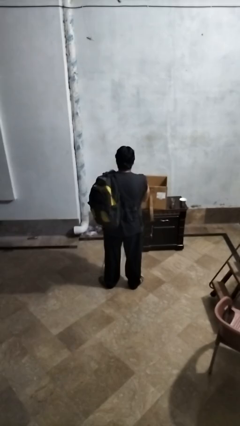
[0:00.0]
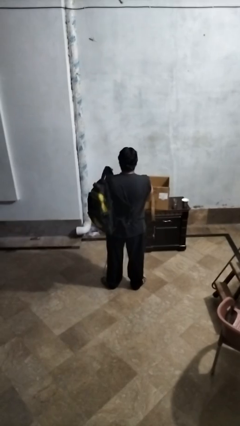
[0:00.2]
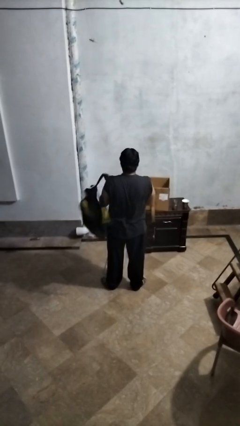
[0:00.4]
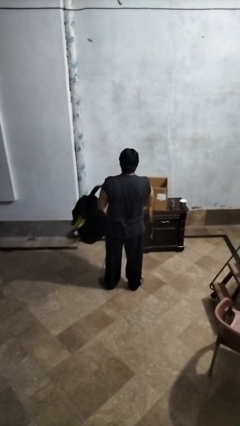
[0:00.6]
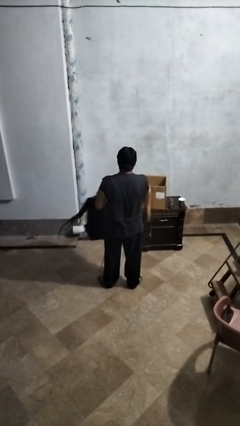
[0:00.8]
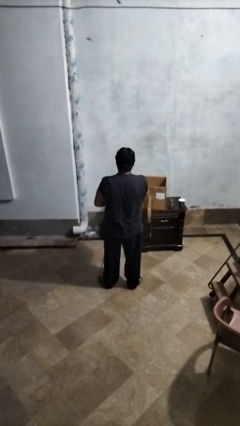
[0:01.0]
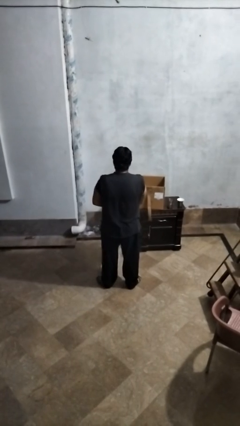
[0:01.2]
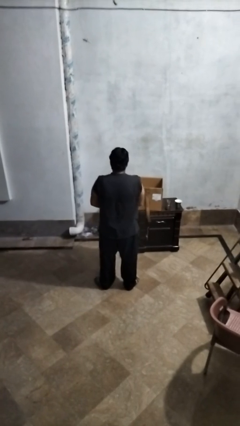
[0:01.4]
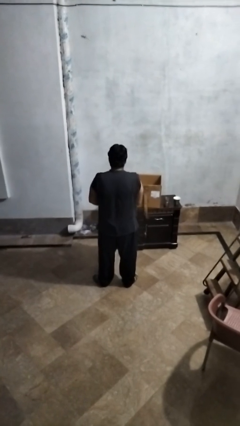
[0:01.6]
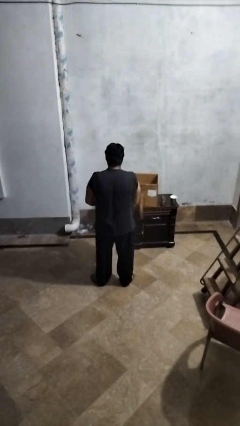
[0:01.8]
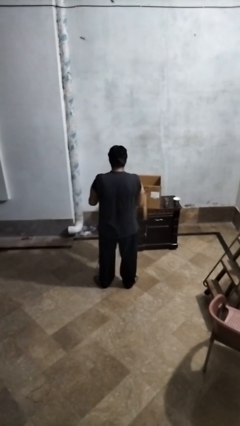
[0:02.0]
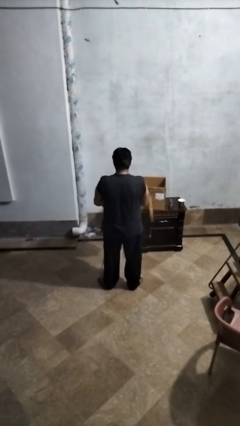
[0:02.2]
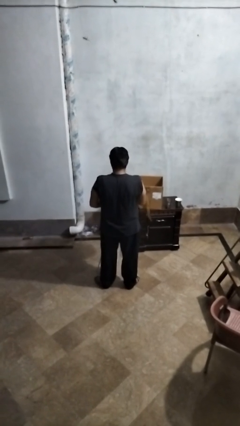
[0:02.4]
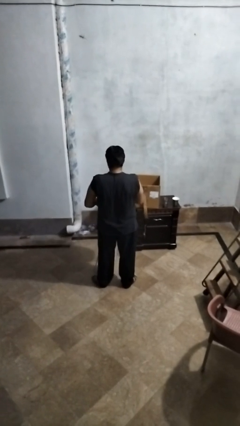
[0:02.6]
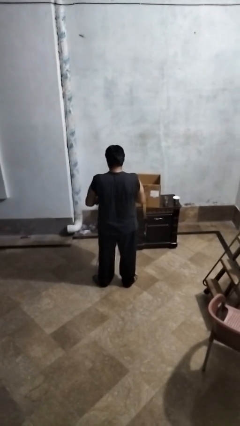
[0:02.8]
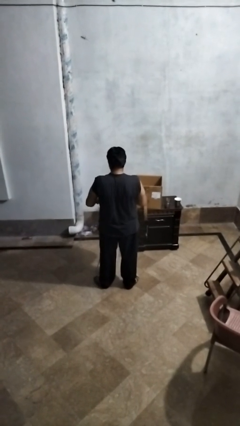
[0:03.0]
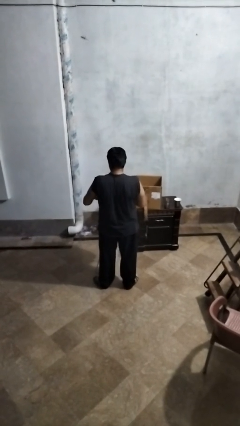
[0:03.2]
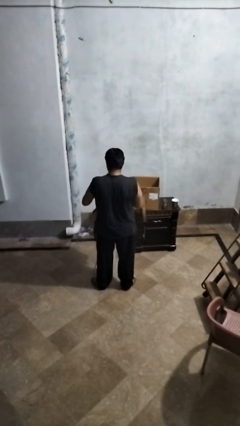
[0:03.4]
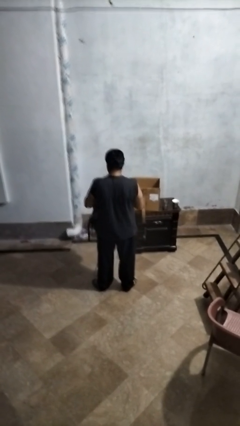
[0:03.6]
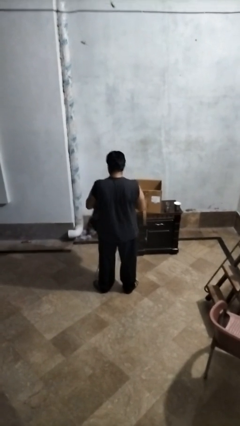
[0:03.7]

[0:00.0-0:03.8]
person takes off backpack

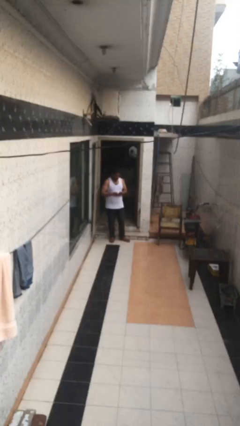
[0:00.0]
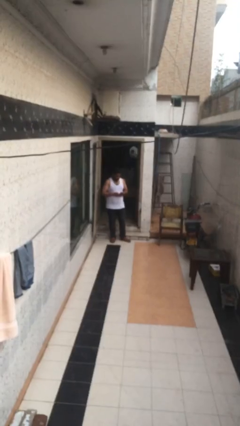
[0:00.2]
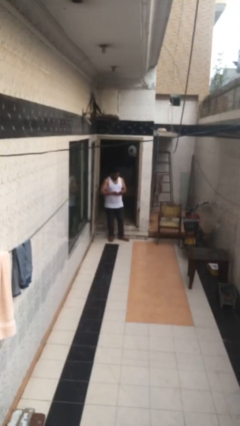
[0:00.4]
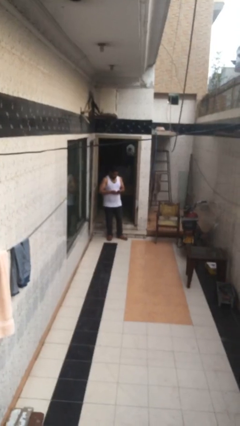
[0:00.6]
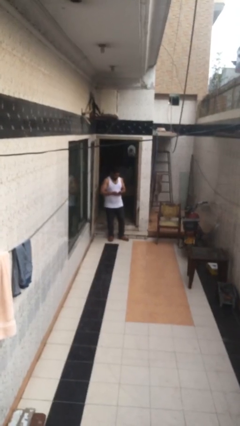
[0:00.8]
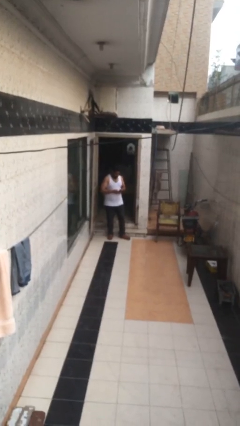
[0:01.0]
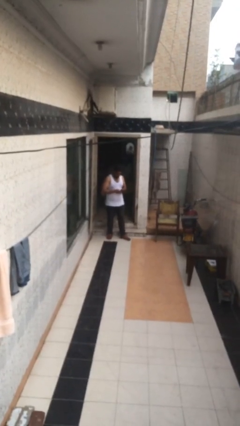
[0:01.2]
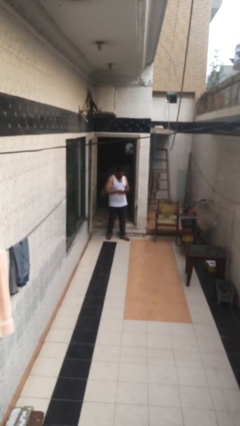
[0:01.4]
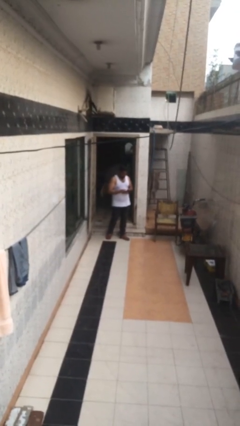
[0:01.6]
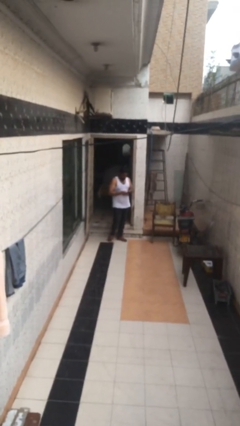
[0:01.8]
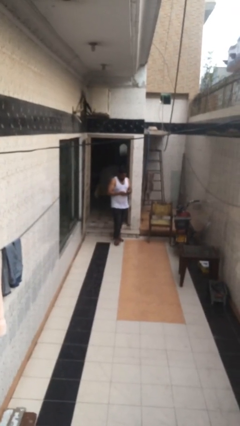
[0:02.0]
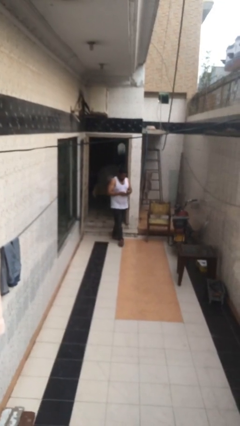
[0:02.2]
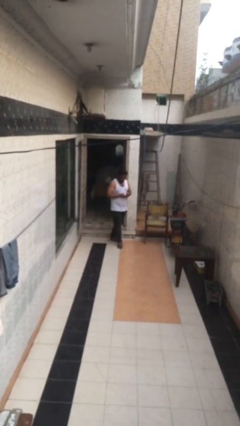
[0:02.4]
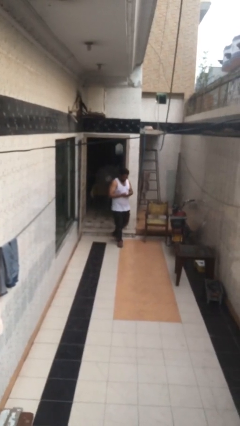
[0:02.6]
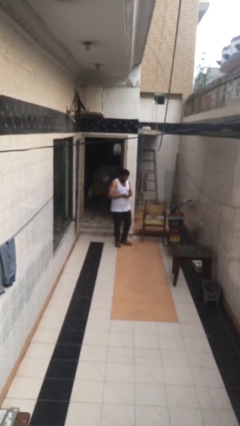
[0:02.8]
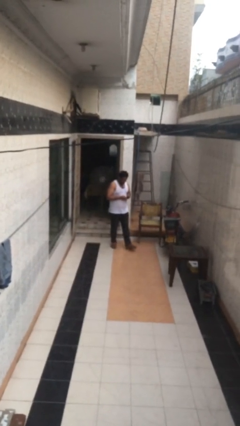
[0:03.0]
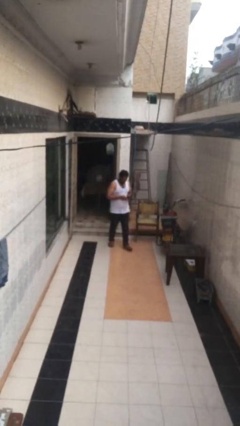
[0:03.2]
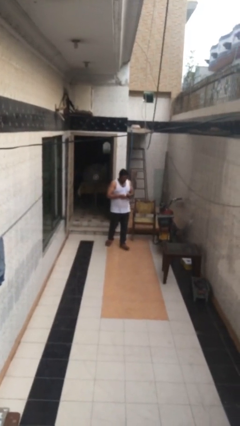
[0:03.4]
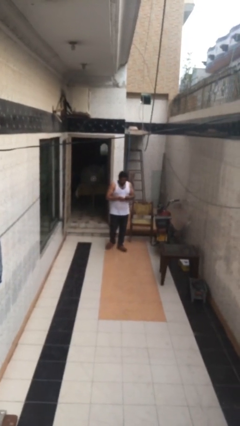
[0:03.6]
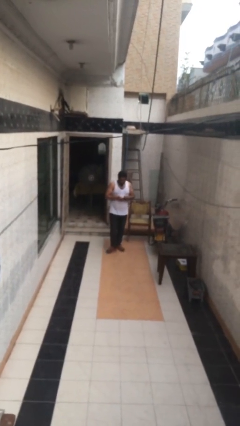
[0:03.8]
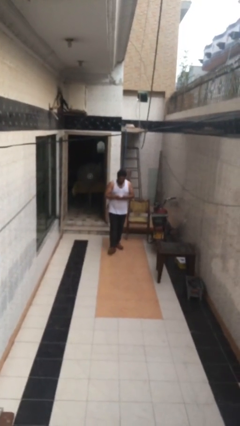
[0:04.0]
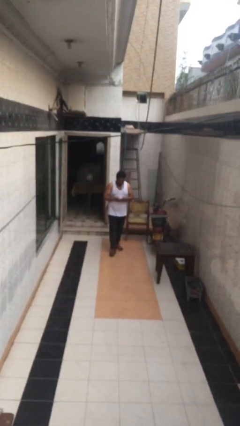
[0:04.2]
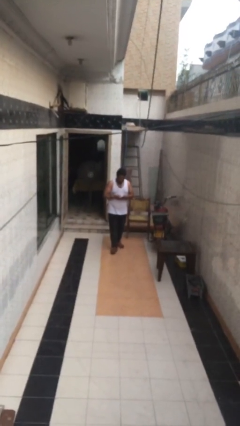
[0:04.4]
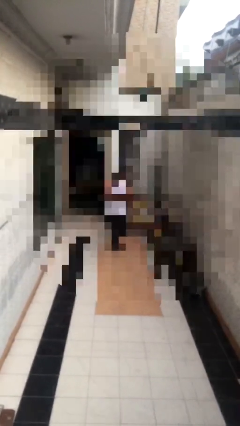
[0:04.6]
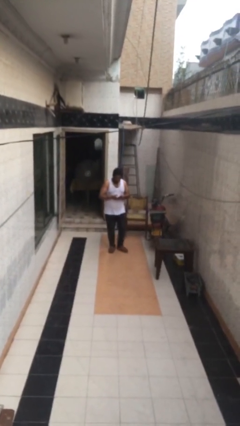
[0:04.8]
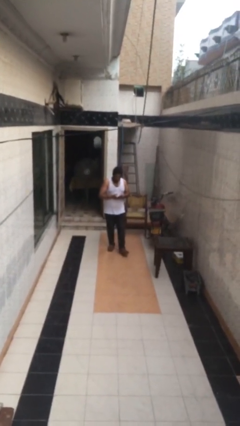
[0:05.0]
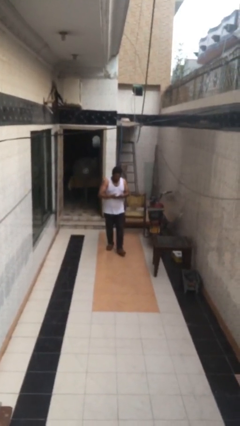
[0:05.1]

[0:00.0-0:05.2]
person texts on phone

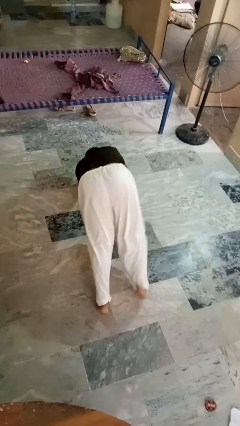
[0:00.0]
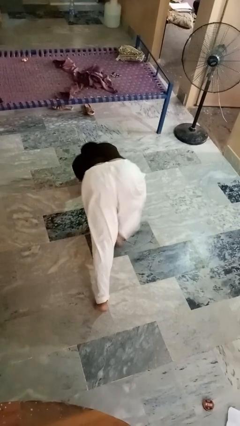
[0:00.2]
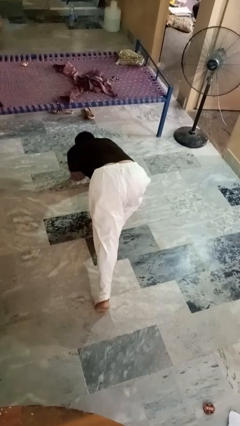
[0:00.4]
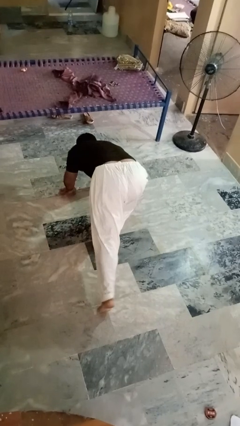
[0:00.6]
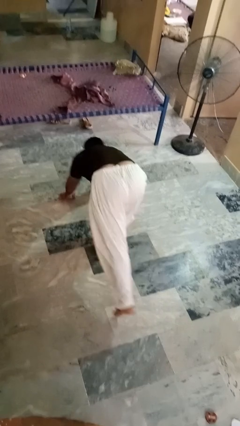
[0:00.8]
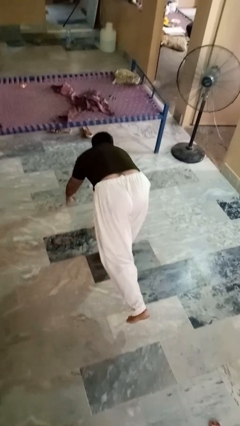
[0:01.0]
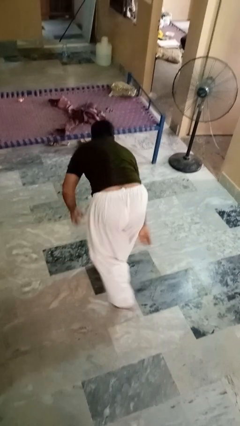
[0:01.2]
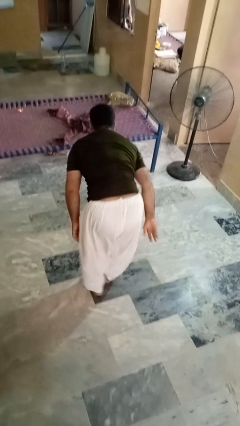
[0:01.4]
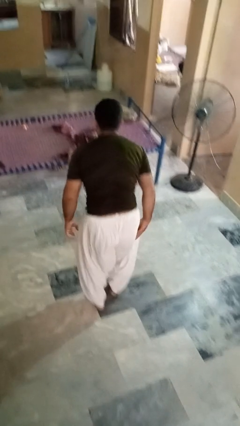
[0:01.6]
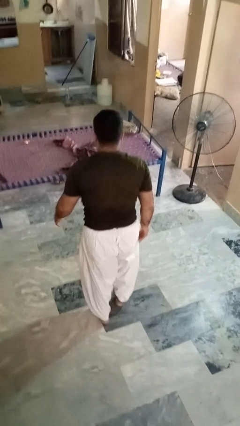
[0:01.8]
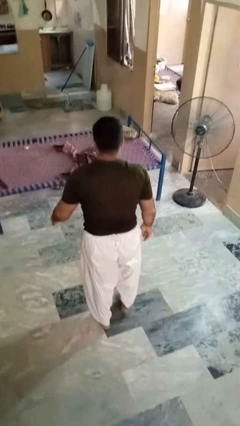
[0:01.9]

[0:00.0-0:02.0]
person stands up from floor

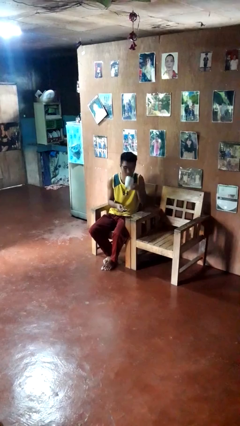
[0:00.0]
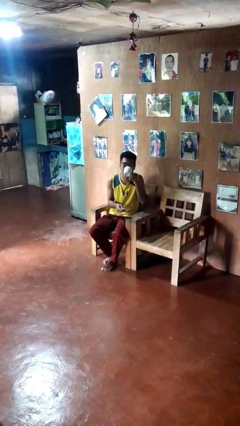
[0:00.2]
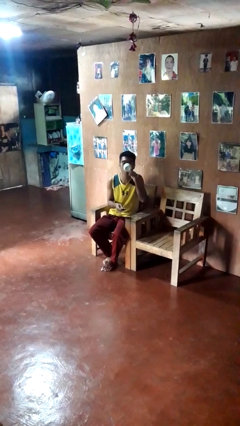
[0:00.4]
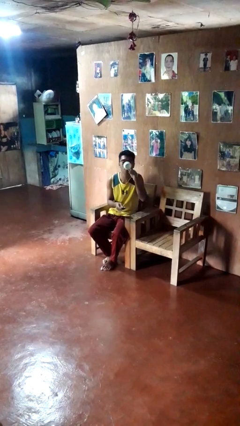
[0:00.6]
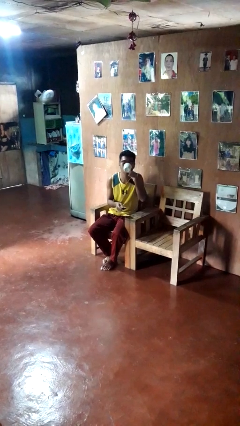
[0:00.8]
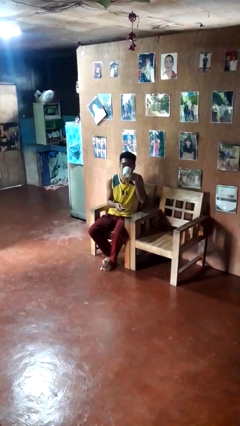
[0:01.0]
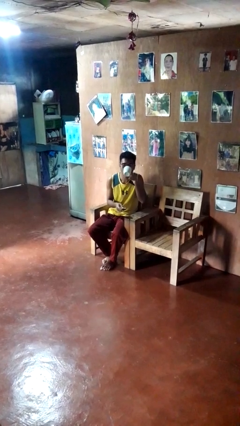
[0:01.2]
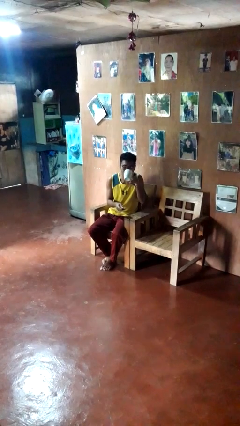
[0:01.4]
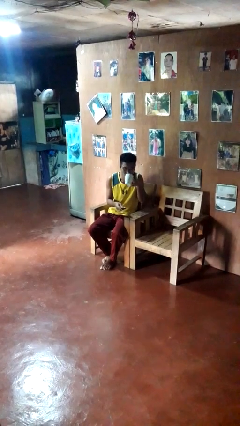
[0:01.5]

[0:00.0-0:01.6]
person drinks from cup

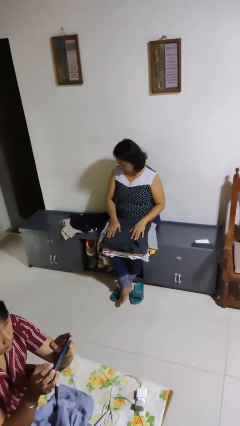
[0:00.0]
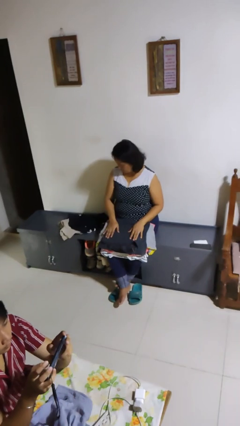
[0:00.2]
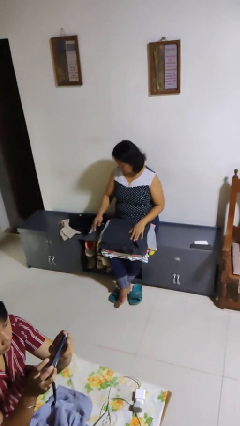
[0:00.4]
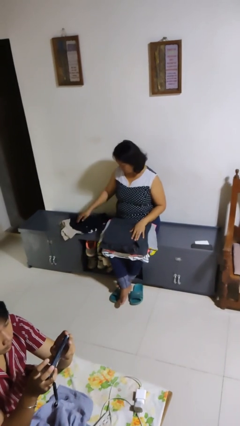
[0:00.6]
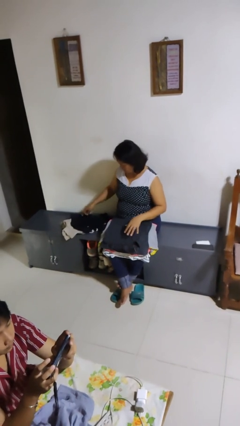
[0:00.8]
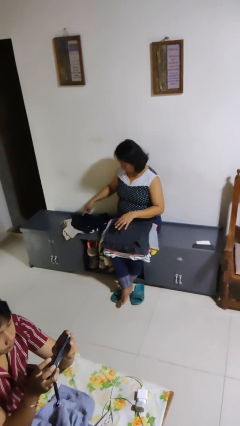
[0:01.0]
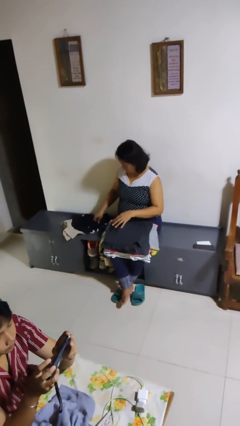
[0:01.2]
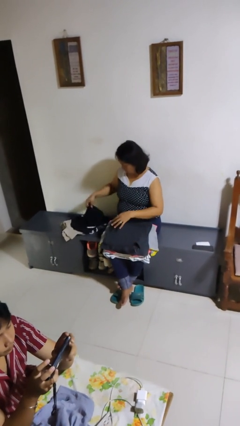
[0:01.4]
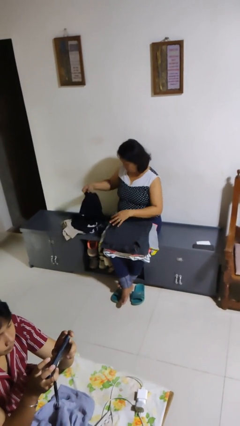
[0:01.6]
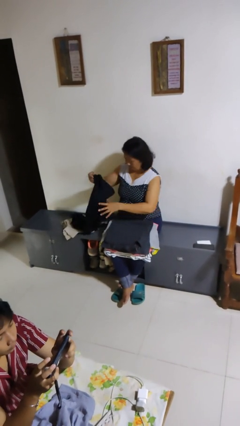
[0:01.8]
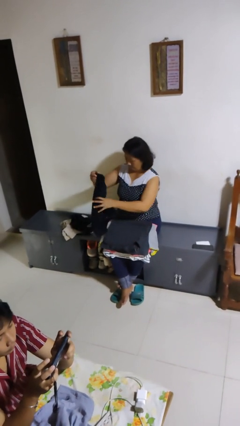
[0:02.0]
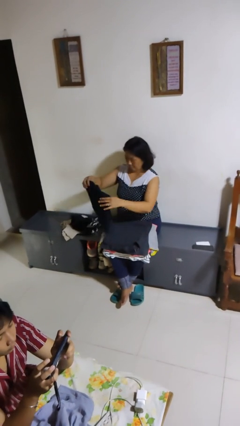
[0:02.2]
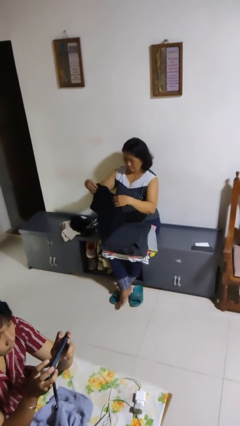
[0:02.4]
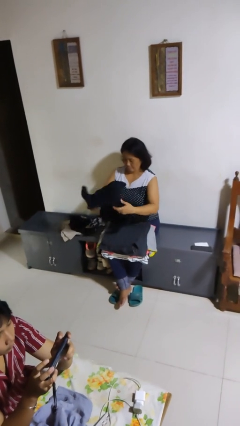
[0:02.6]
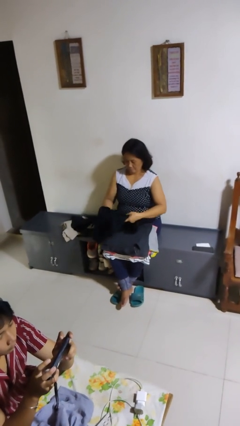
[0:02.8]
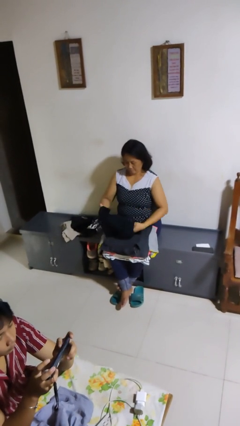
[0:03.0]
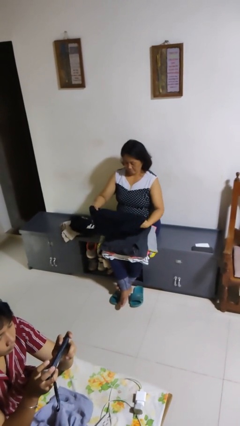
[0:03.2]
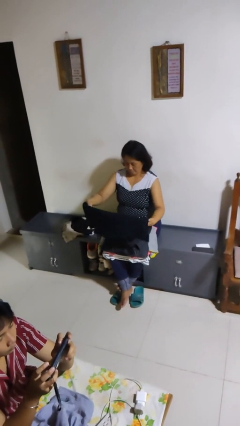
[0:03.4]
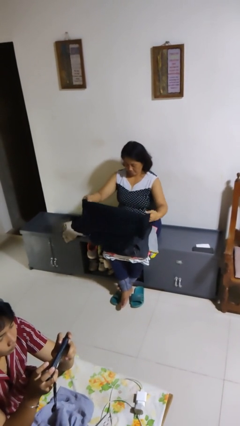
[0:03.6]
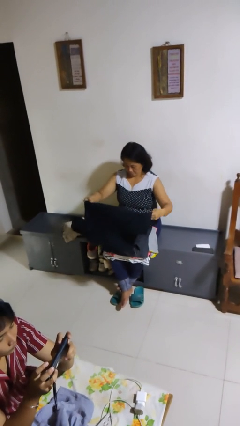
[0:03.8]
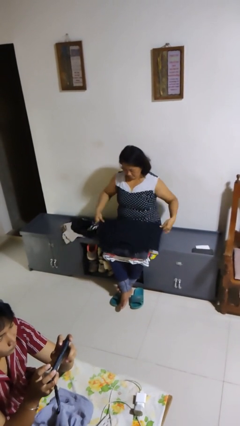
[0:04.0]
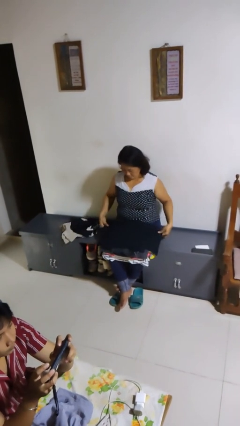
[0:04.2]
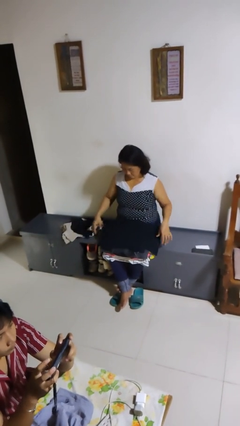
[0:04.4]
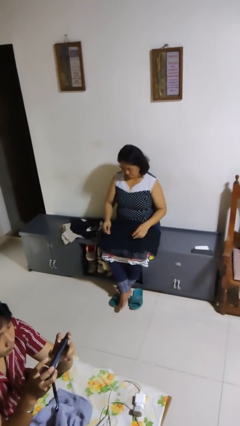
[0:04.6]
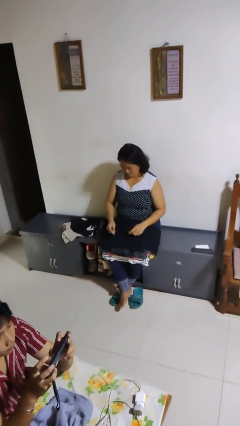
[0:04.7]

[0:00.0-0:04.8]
person folds shirt

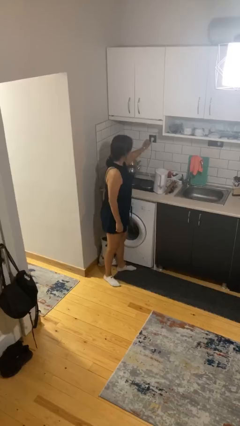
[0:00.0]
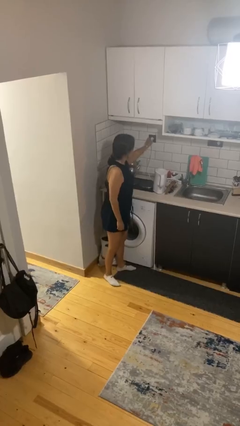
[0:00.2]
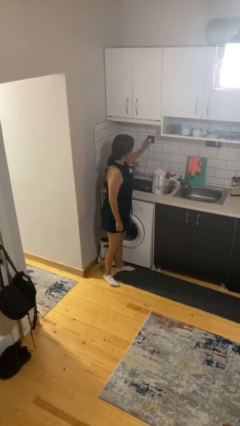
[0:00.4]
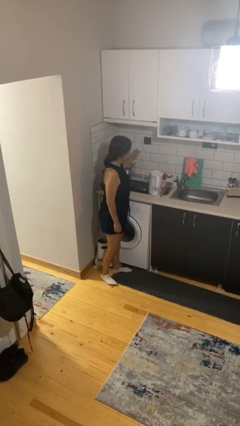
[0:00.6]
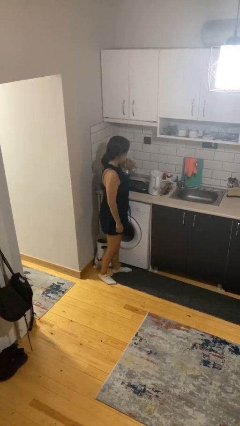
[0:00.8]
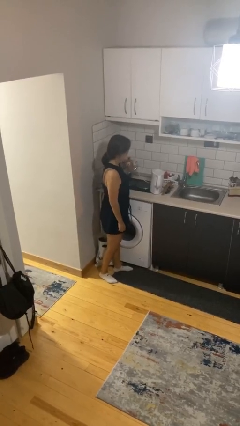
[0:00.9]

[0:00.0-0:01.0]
person unplugs from electrical socket
